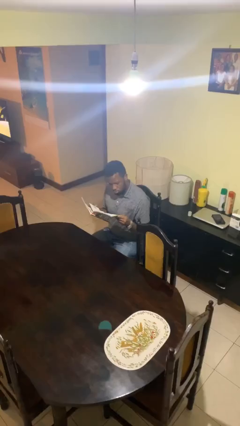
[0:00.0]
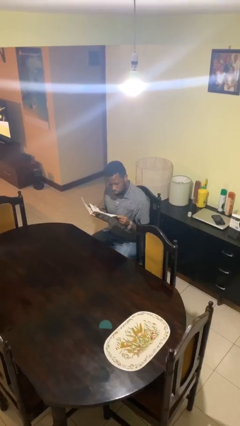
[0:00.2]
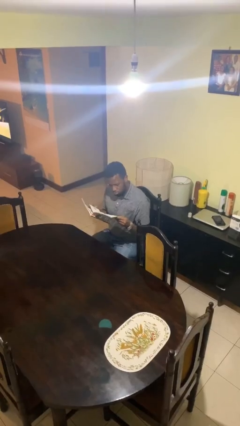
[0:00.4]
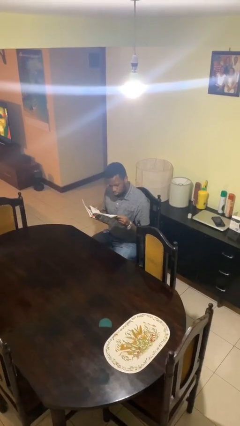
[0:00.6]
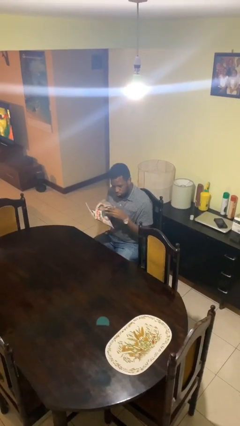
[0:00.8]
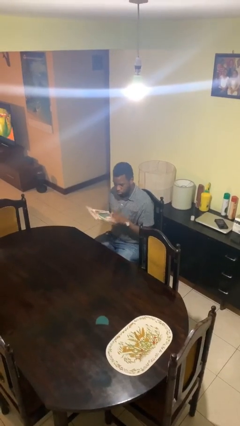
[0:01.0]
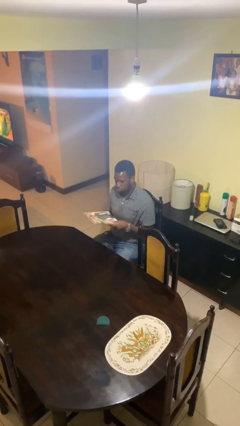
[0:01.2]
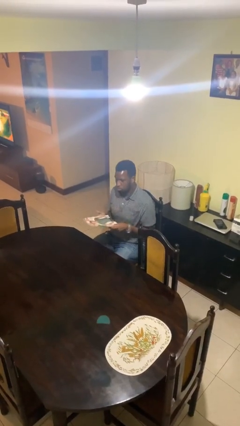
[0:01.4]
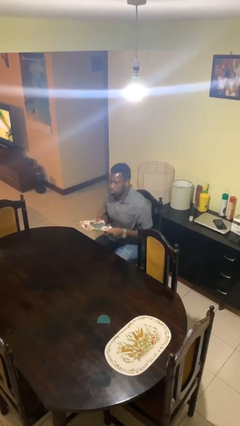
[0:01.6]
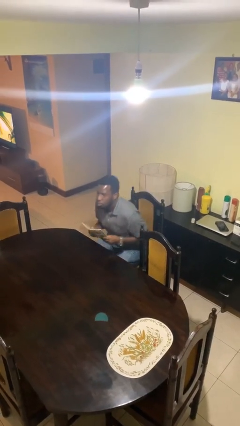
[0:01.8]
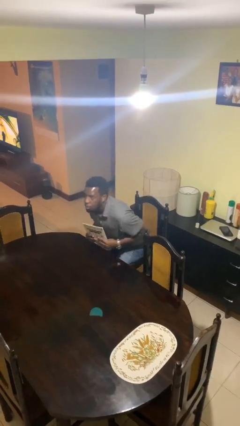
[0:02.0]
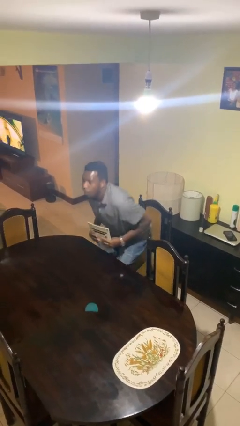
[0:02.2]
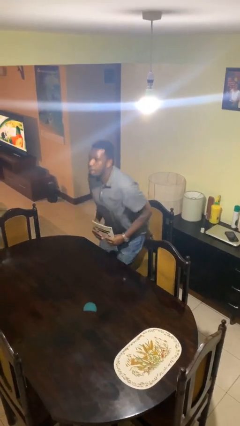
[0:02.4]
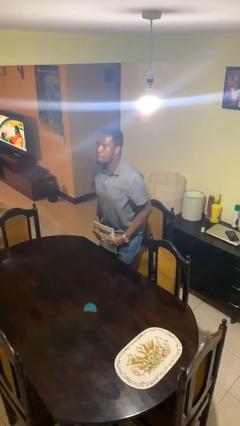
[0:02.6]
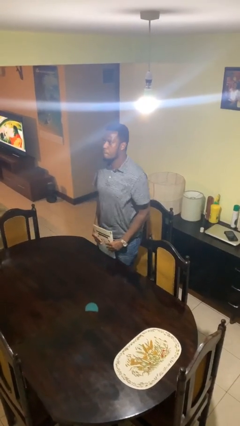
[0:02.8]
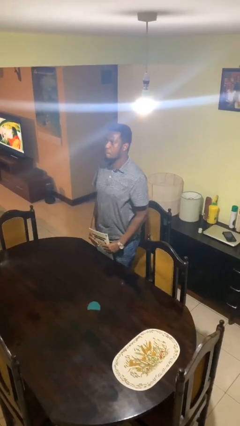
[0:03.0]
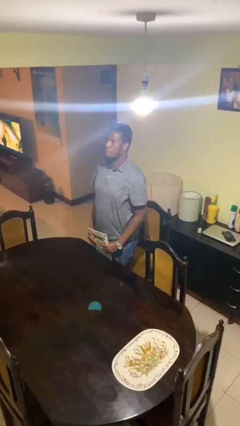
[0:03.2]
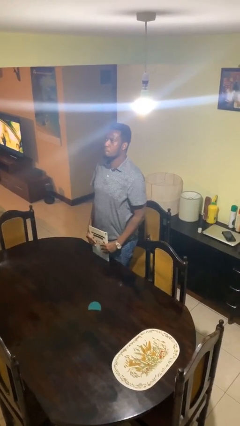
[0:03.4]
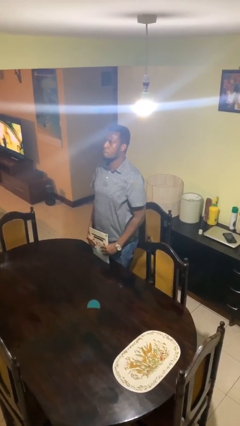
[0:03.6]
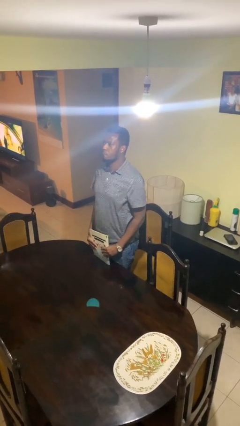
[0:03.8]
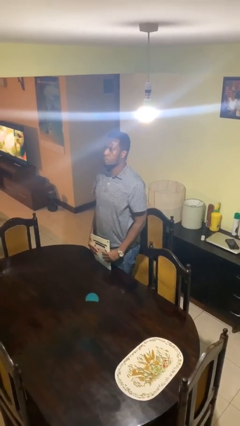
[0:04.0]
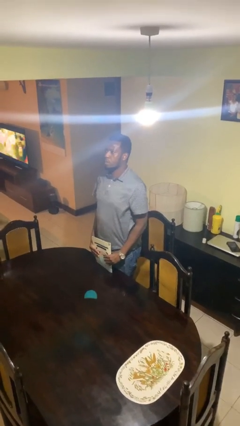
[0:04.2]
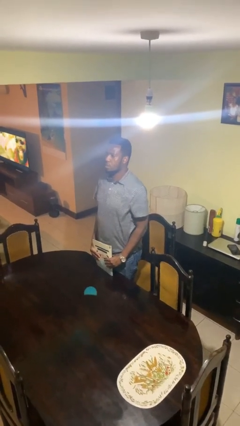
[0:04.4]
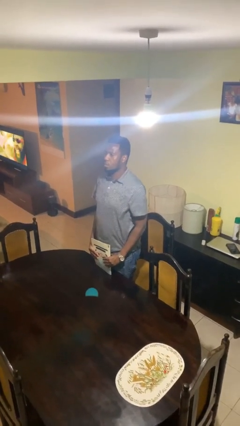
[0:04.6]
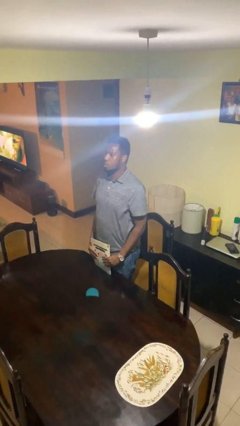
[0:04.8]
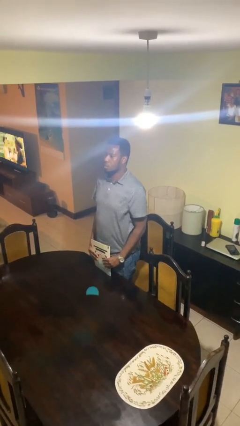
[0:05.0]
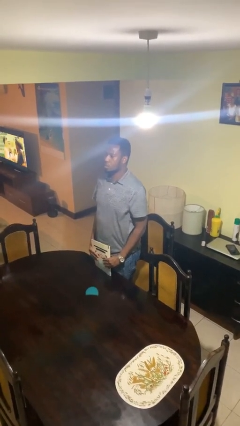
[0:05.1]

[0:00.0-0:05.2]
person stands up

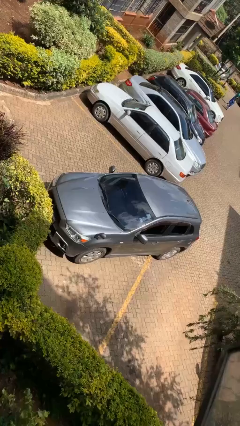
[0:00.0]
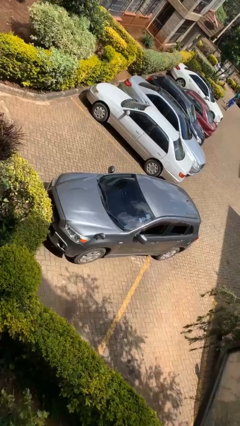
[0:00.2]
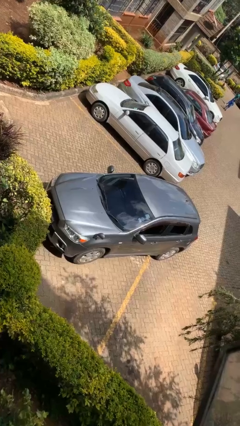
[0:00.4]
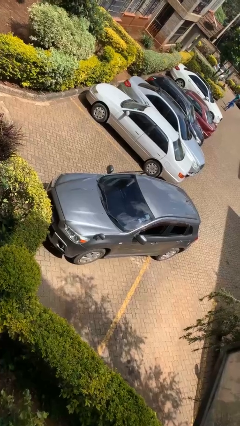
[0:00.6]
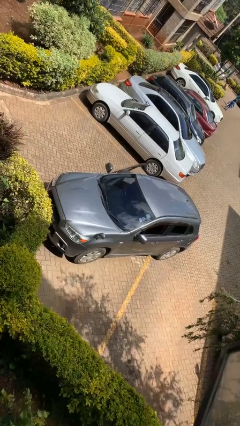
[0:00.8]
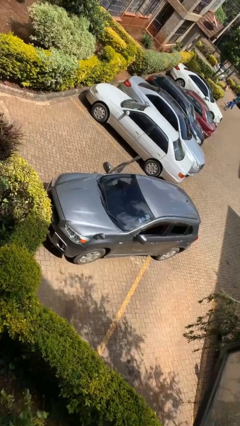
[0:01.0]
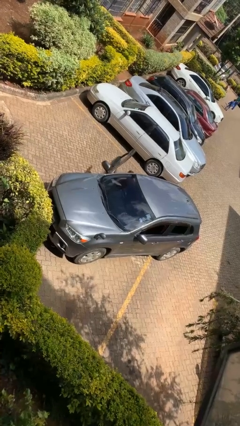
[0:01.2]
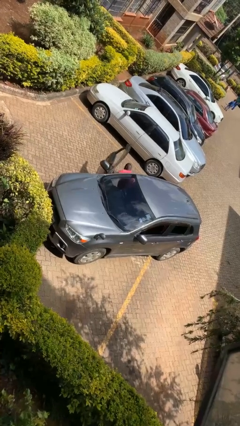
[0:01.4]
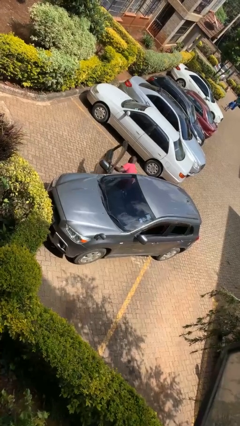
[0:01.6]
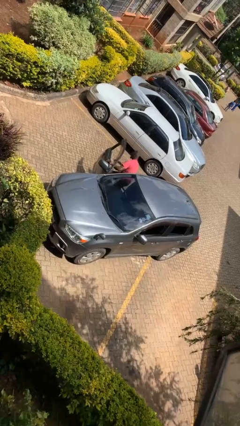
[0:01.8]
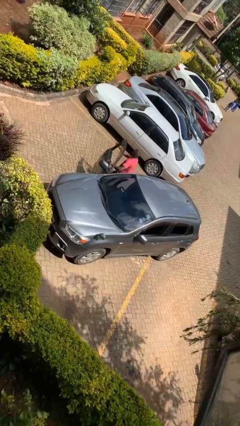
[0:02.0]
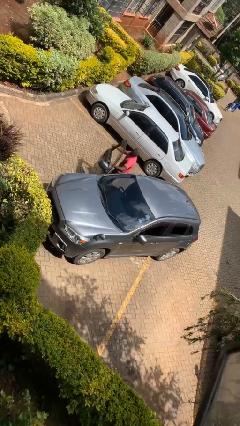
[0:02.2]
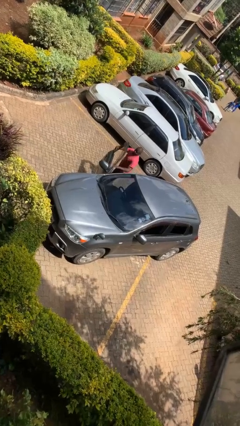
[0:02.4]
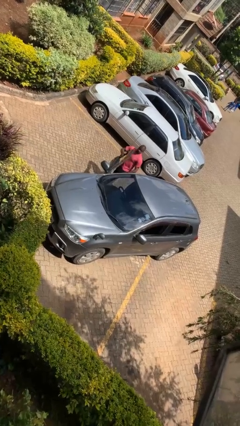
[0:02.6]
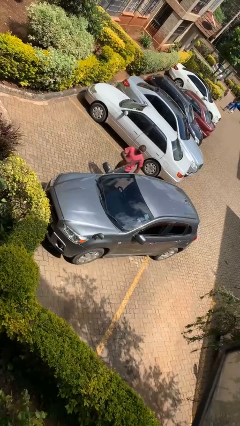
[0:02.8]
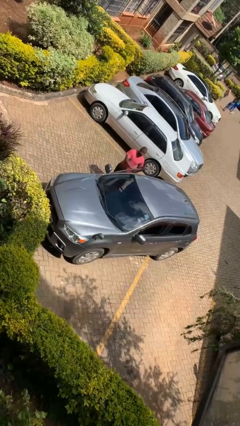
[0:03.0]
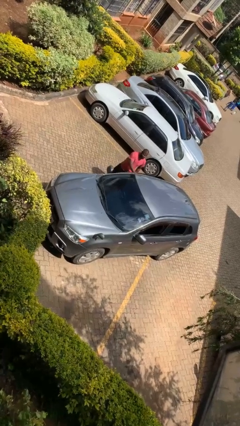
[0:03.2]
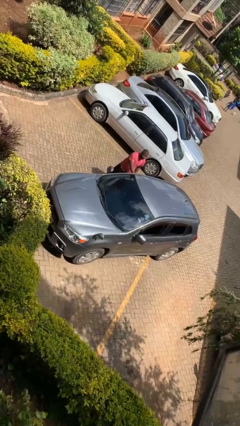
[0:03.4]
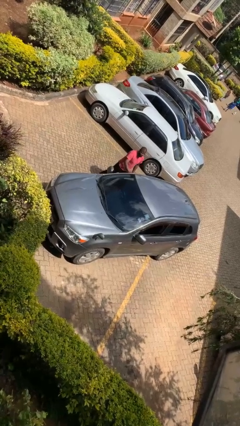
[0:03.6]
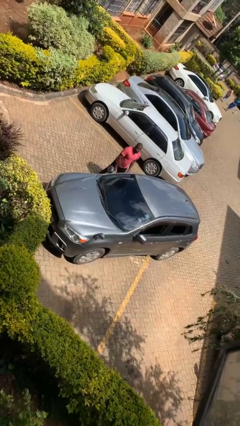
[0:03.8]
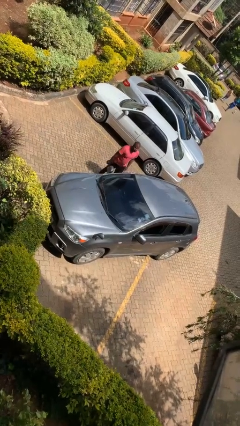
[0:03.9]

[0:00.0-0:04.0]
car drops off person

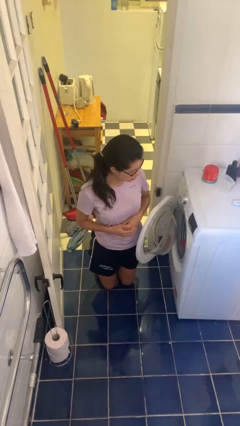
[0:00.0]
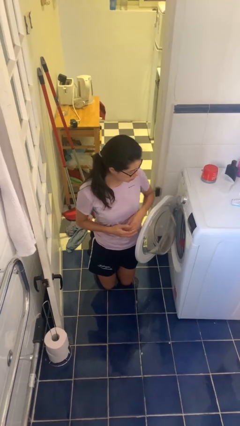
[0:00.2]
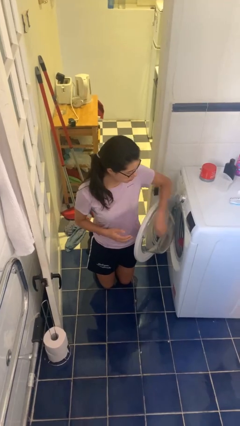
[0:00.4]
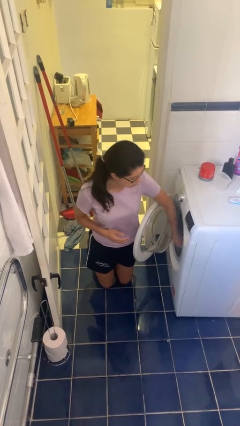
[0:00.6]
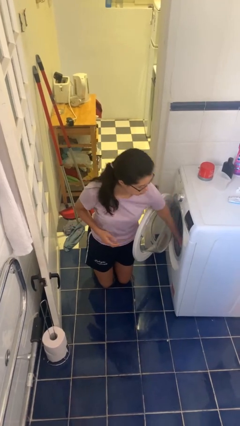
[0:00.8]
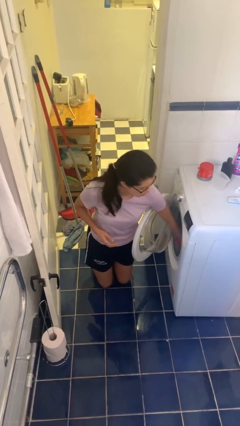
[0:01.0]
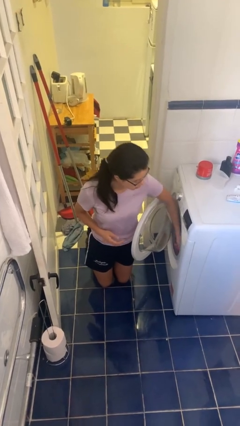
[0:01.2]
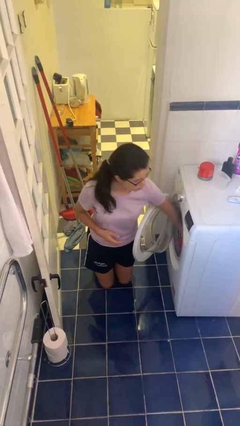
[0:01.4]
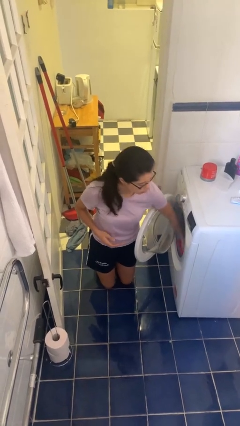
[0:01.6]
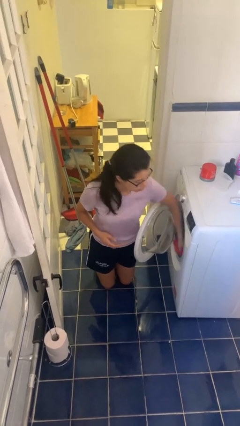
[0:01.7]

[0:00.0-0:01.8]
person unloads dryer

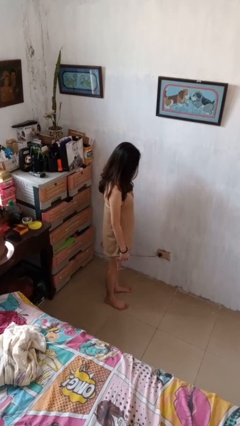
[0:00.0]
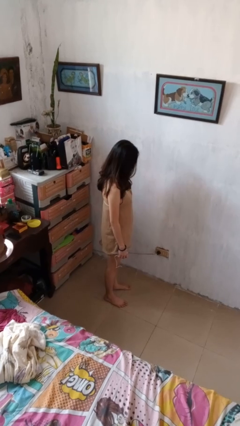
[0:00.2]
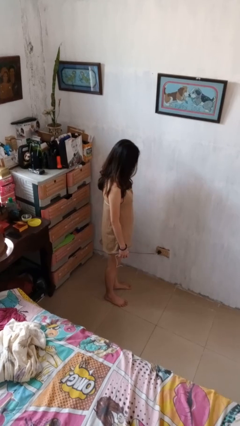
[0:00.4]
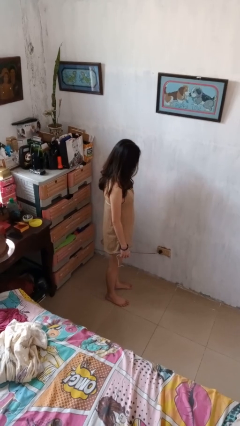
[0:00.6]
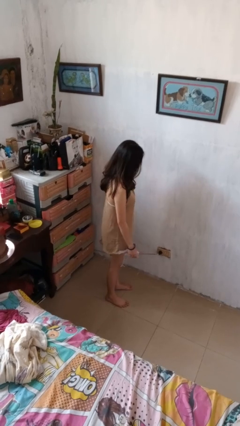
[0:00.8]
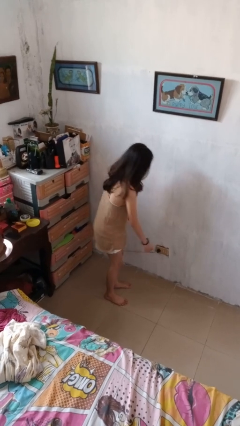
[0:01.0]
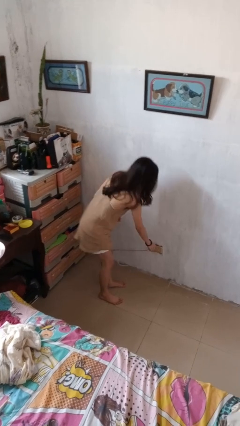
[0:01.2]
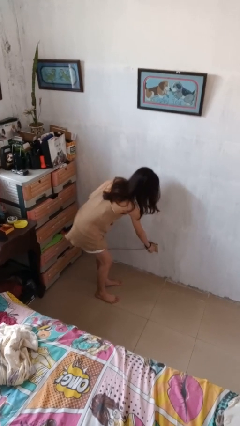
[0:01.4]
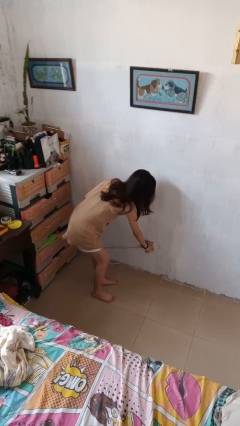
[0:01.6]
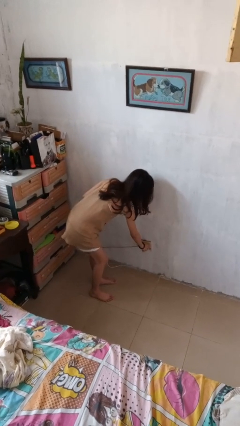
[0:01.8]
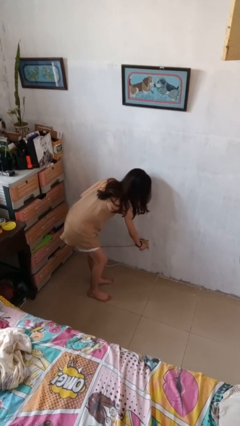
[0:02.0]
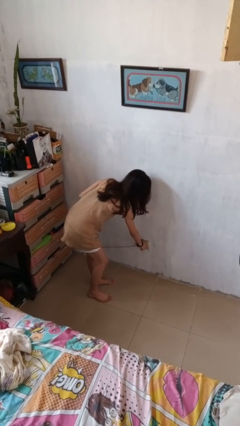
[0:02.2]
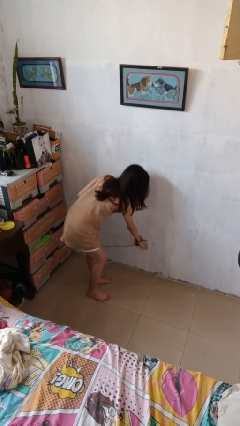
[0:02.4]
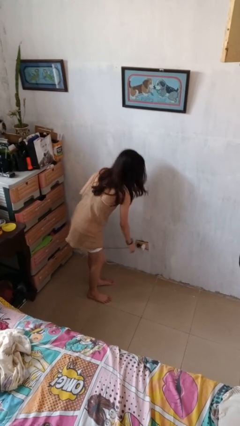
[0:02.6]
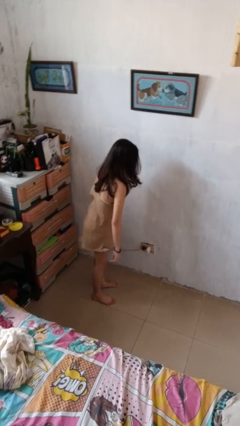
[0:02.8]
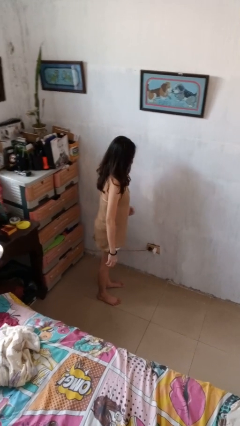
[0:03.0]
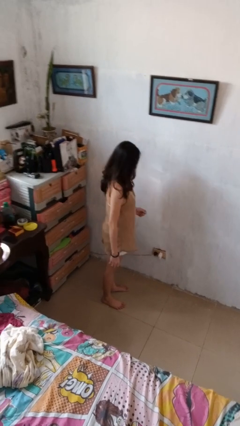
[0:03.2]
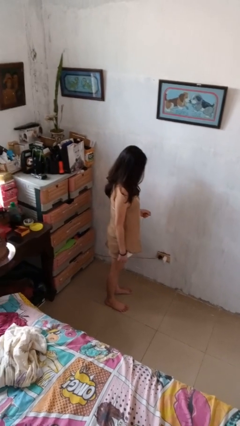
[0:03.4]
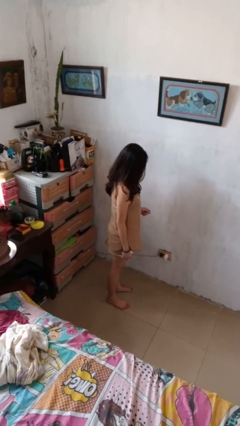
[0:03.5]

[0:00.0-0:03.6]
person plugs into electrical socket

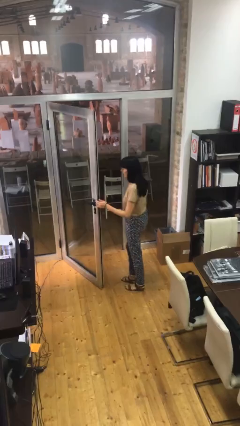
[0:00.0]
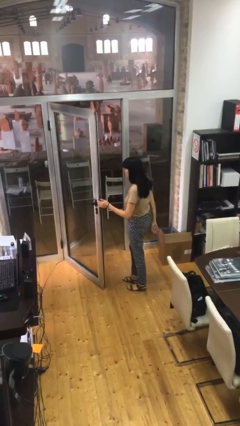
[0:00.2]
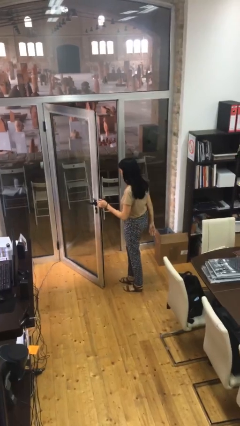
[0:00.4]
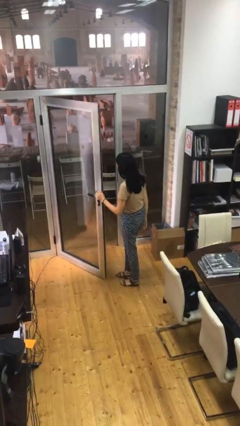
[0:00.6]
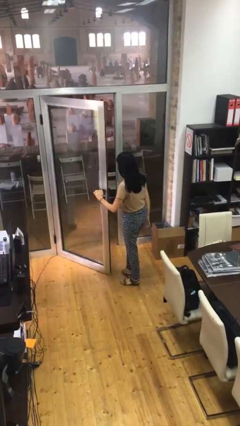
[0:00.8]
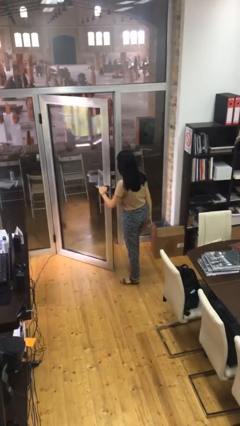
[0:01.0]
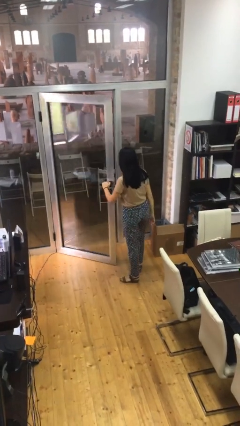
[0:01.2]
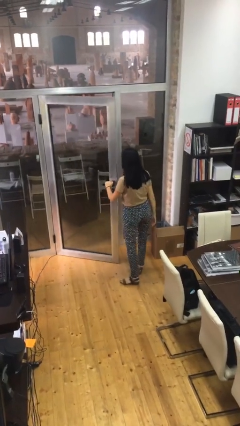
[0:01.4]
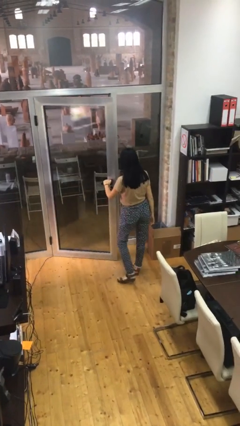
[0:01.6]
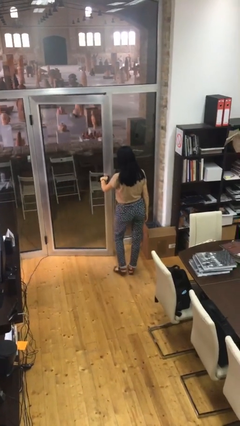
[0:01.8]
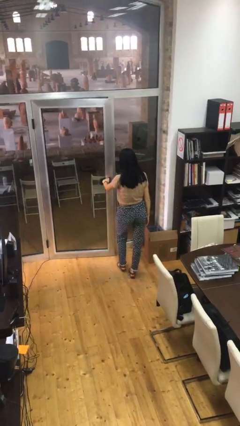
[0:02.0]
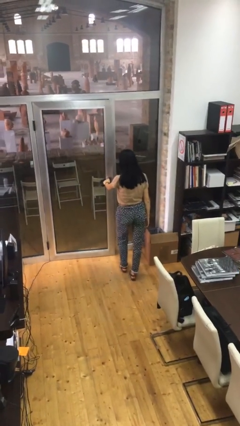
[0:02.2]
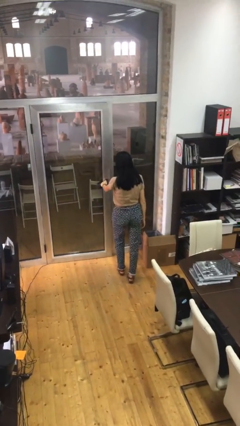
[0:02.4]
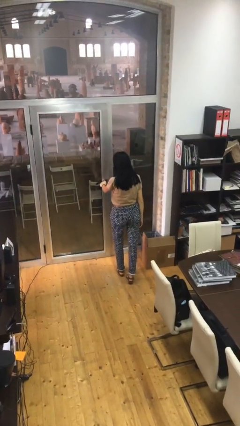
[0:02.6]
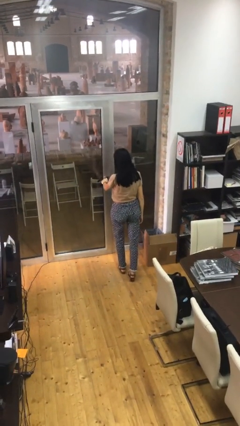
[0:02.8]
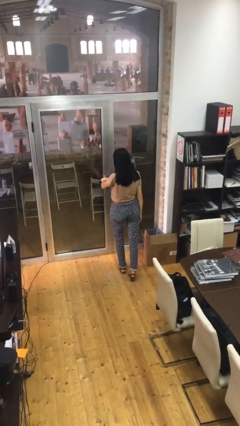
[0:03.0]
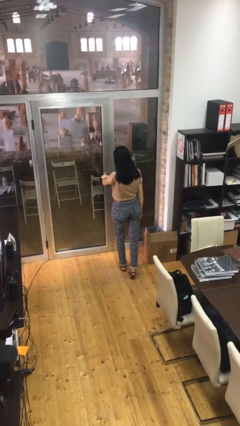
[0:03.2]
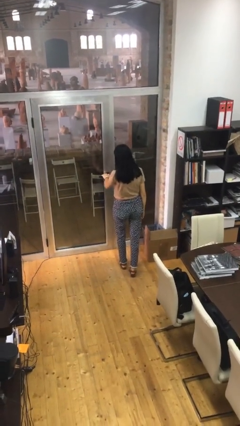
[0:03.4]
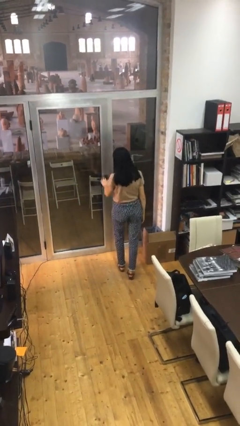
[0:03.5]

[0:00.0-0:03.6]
person closes facility door
